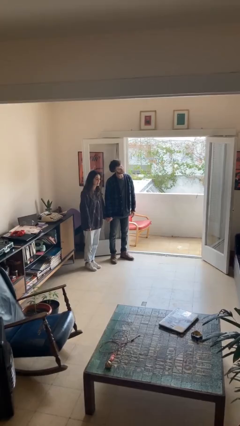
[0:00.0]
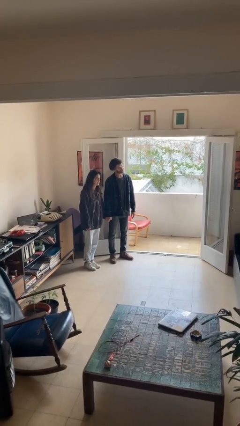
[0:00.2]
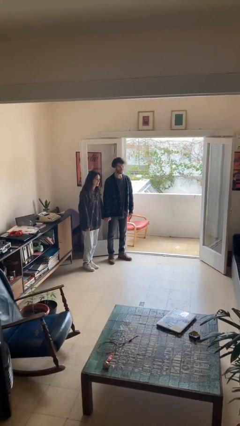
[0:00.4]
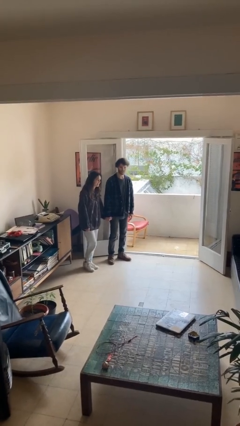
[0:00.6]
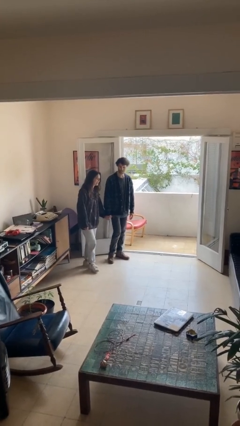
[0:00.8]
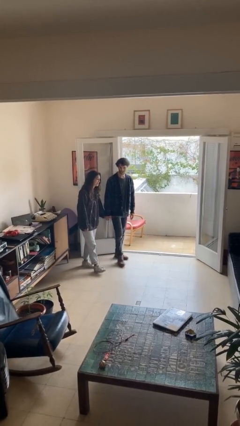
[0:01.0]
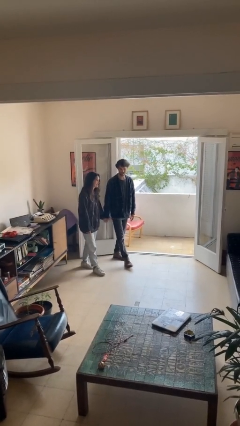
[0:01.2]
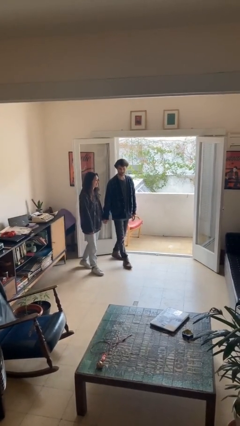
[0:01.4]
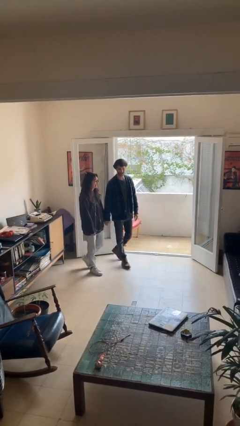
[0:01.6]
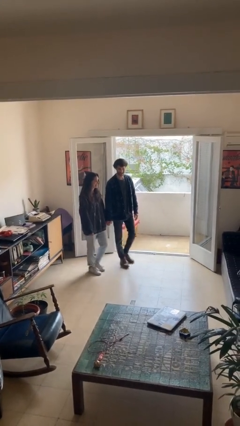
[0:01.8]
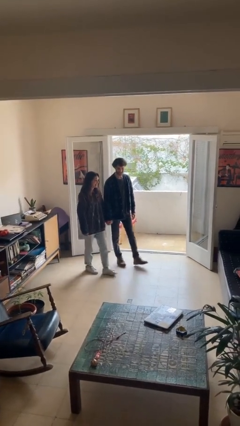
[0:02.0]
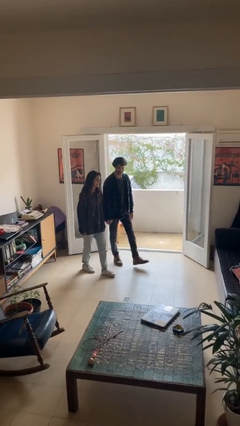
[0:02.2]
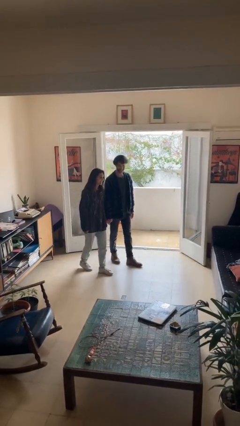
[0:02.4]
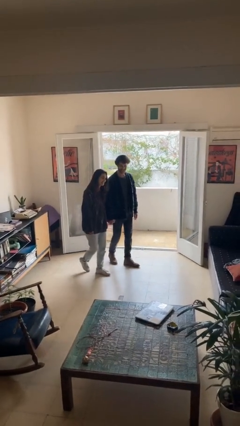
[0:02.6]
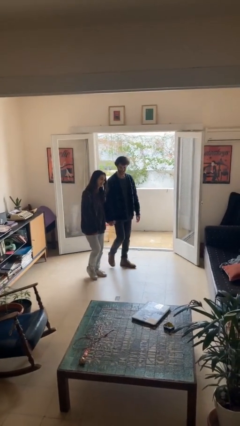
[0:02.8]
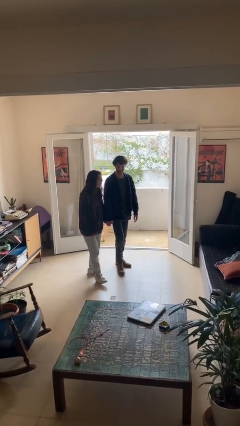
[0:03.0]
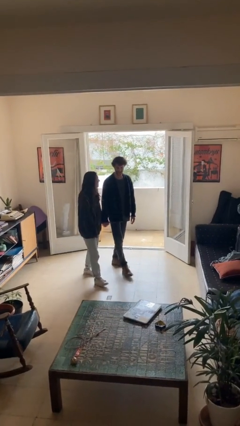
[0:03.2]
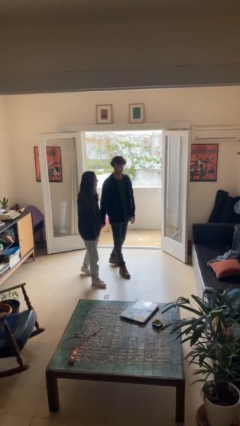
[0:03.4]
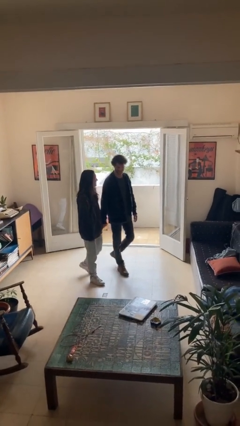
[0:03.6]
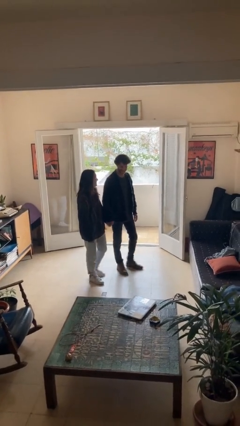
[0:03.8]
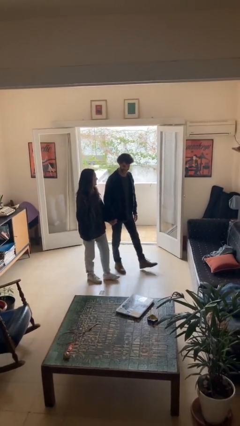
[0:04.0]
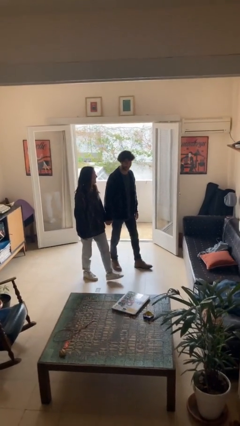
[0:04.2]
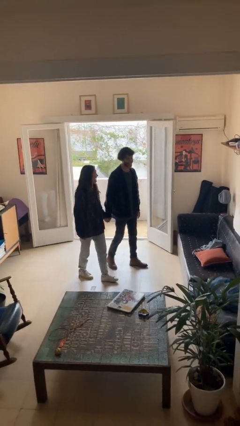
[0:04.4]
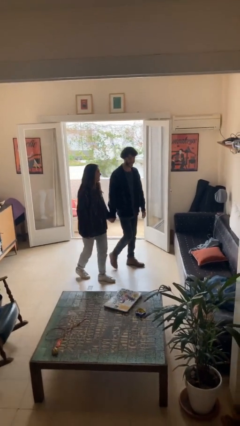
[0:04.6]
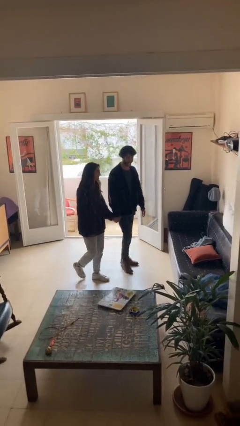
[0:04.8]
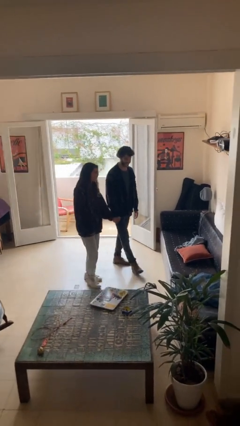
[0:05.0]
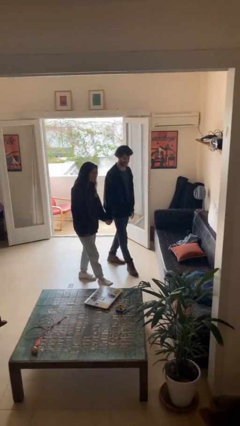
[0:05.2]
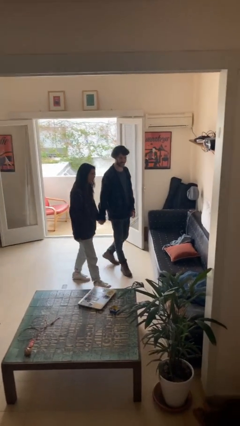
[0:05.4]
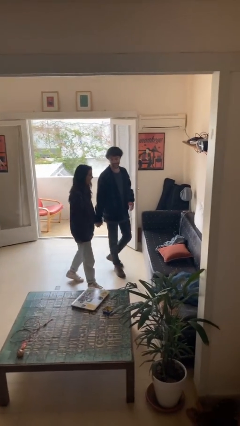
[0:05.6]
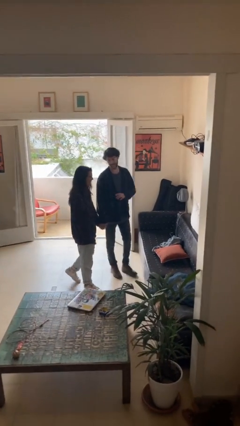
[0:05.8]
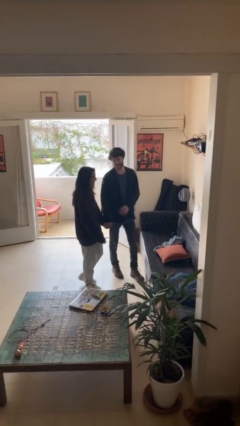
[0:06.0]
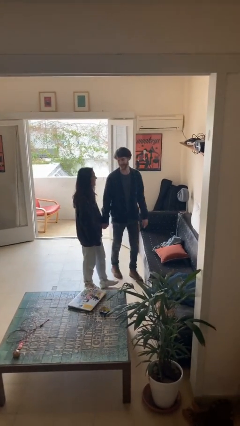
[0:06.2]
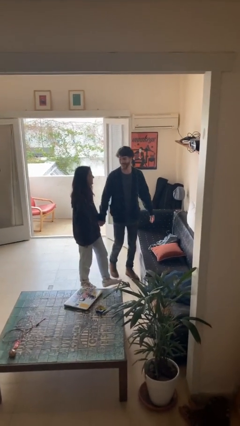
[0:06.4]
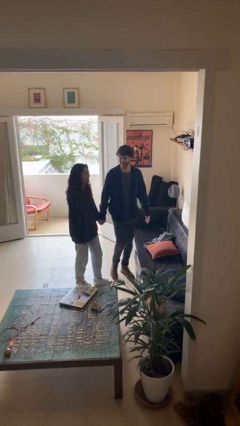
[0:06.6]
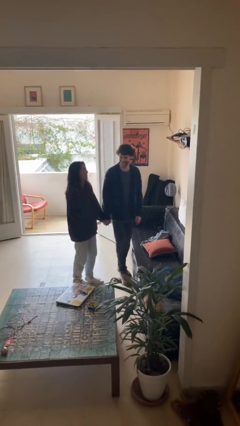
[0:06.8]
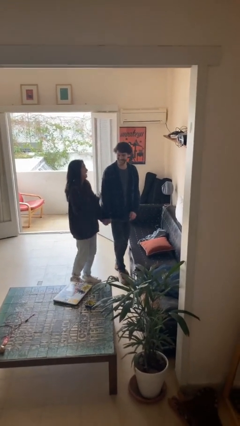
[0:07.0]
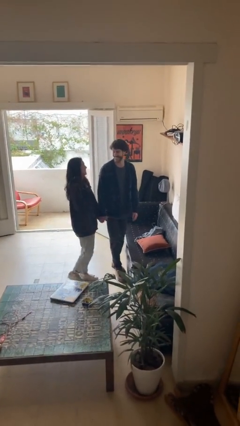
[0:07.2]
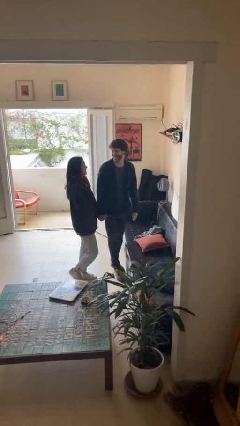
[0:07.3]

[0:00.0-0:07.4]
person holds hand

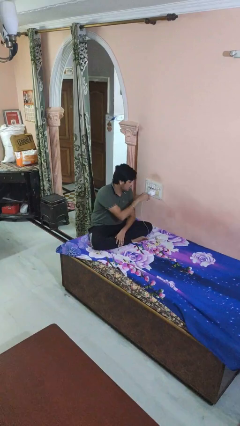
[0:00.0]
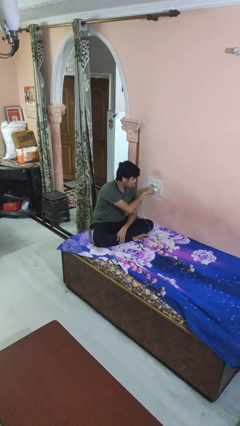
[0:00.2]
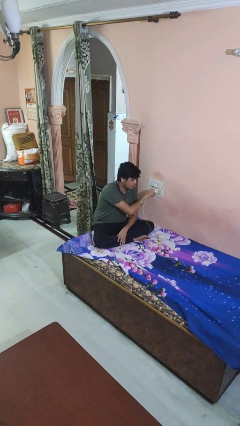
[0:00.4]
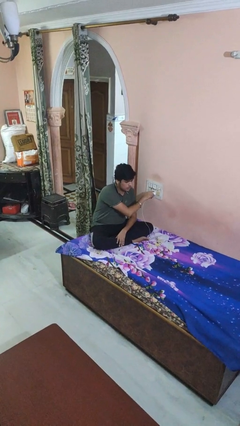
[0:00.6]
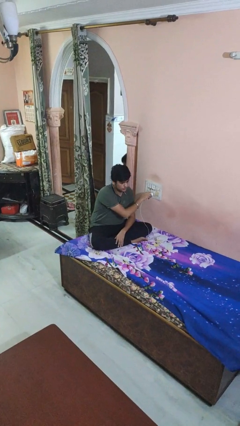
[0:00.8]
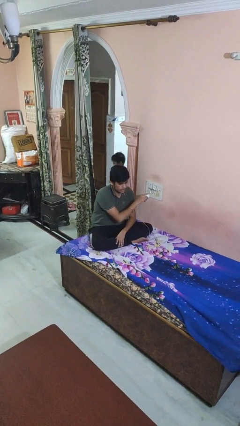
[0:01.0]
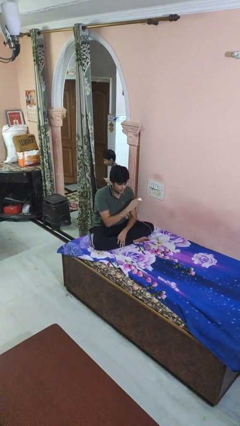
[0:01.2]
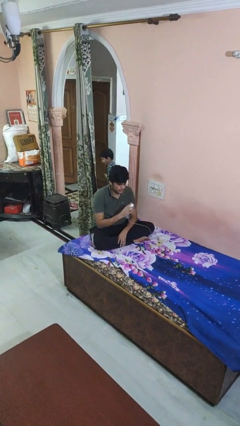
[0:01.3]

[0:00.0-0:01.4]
person unplugs from electrical socket

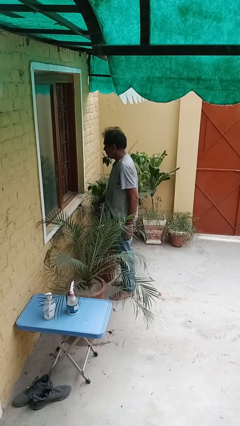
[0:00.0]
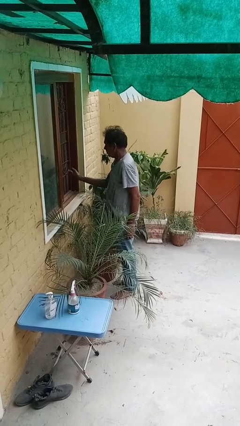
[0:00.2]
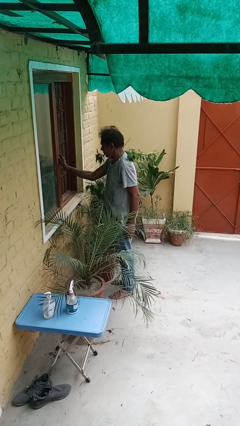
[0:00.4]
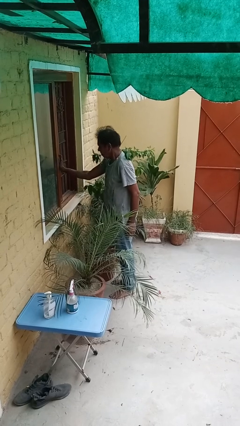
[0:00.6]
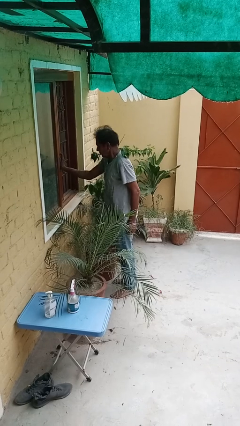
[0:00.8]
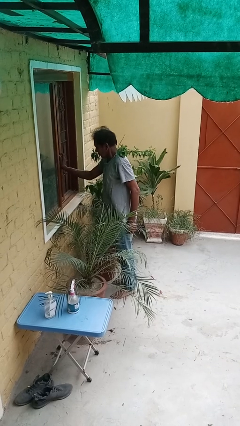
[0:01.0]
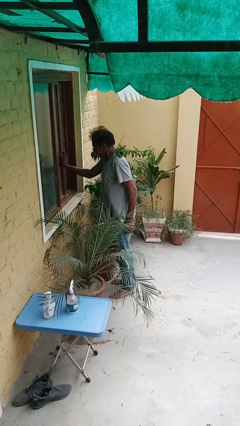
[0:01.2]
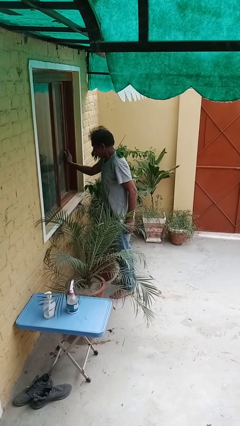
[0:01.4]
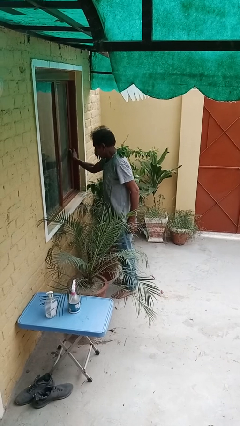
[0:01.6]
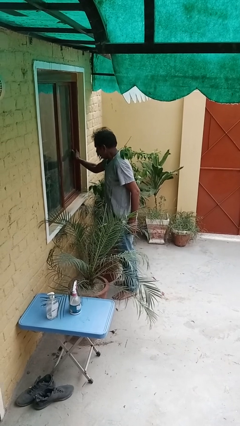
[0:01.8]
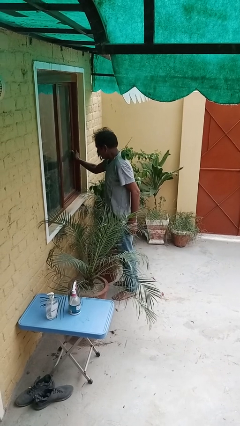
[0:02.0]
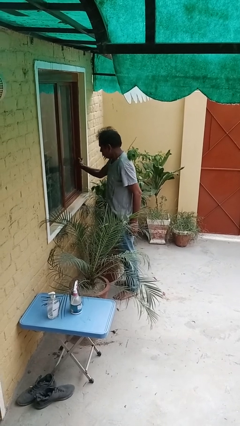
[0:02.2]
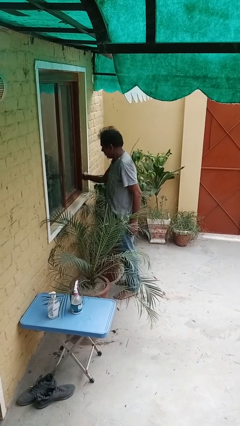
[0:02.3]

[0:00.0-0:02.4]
person closes home window

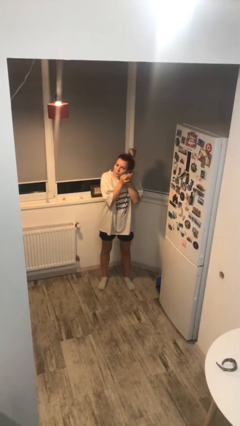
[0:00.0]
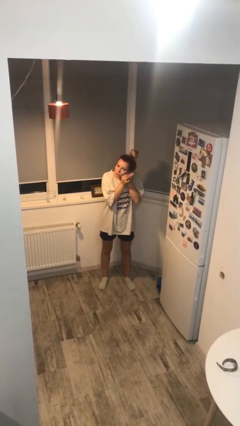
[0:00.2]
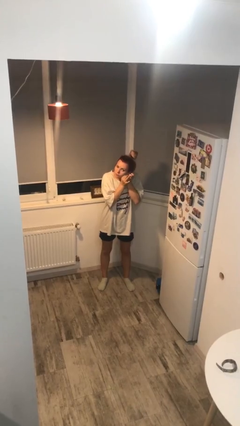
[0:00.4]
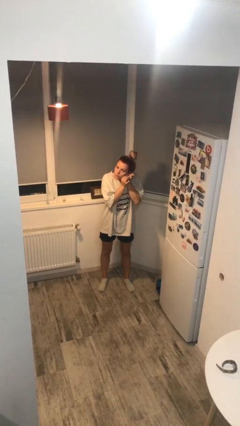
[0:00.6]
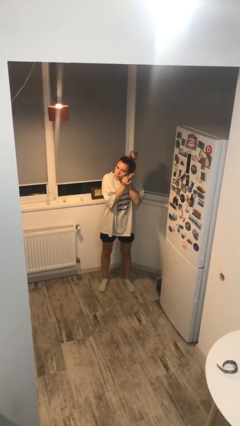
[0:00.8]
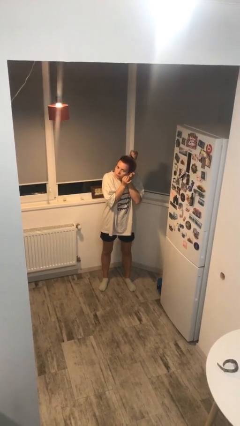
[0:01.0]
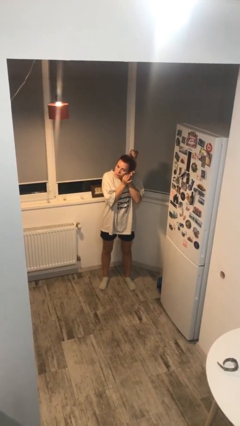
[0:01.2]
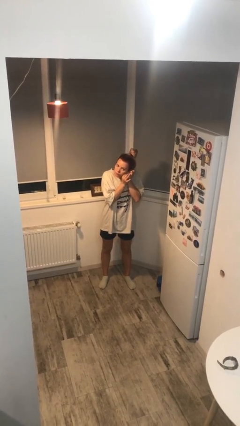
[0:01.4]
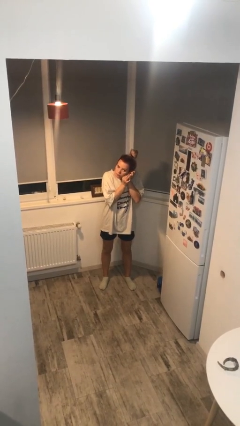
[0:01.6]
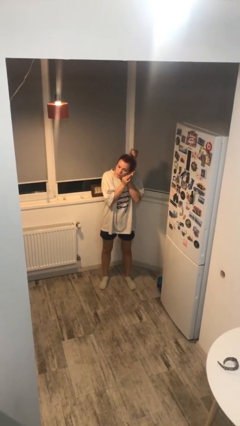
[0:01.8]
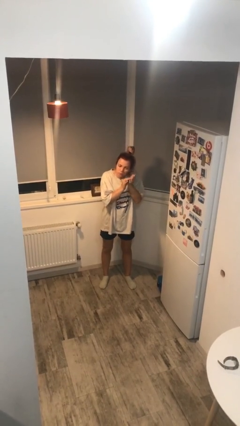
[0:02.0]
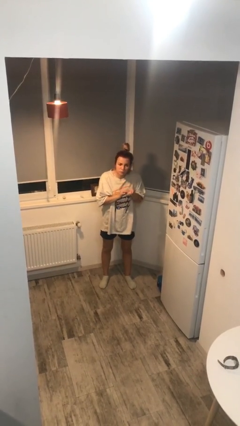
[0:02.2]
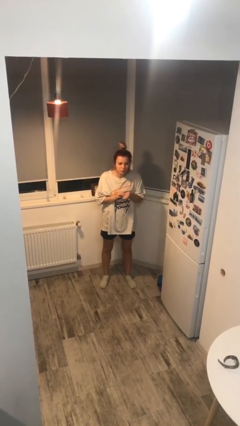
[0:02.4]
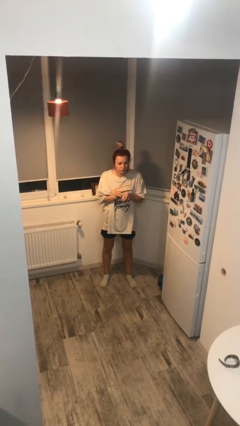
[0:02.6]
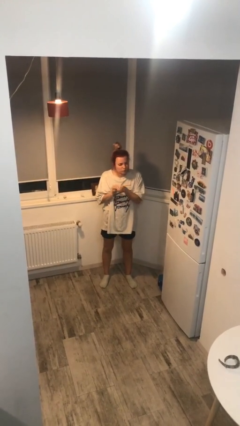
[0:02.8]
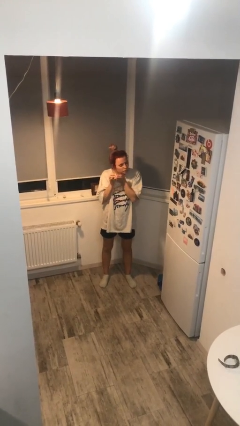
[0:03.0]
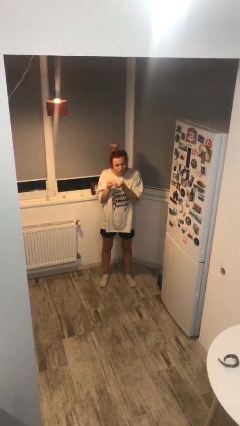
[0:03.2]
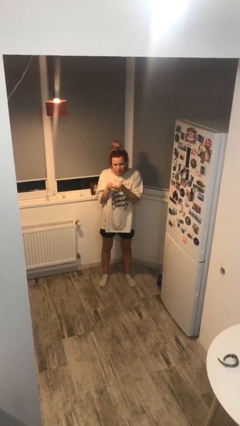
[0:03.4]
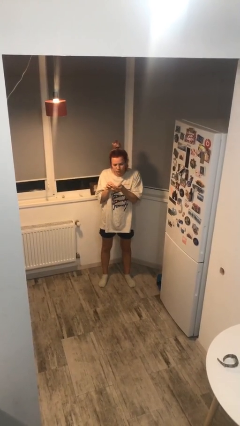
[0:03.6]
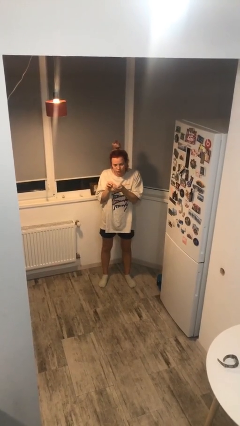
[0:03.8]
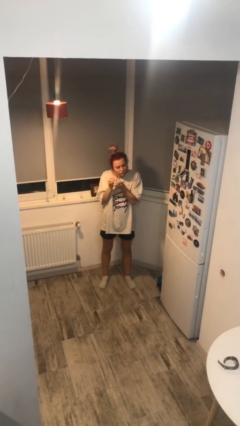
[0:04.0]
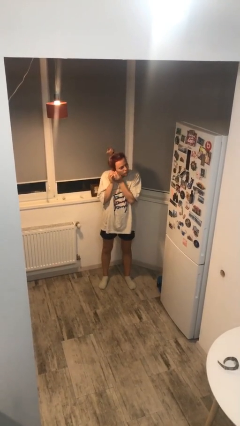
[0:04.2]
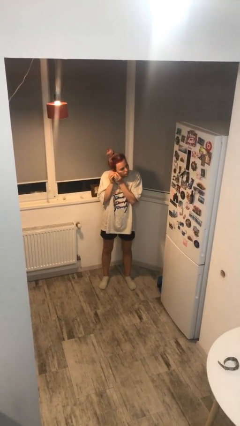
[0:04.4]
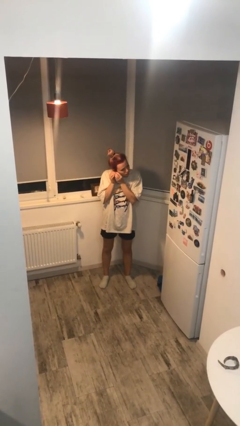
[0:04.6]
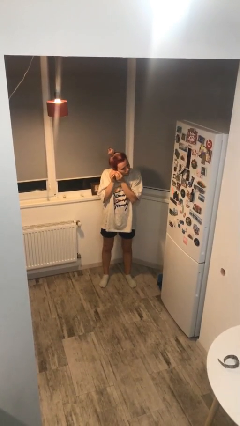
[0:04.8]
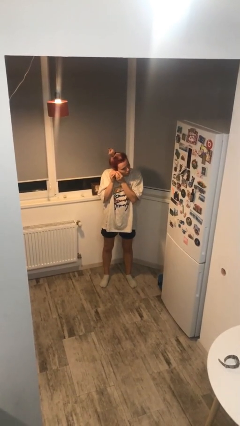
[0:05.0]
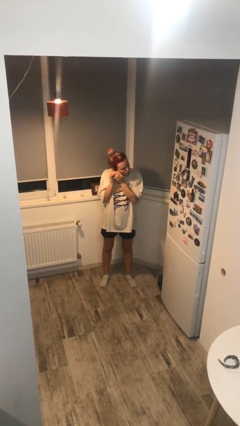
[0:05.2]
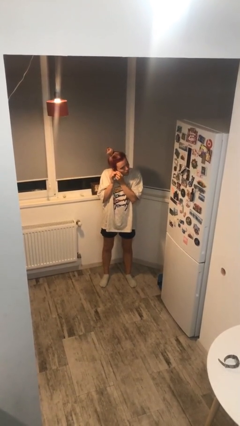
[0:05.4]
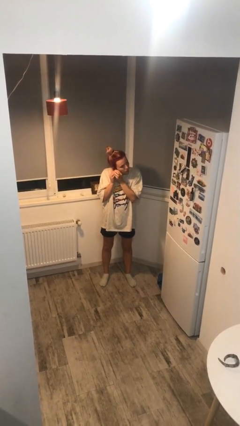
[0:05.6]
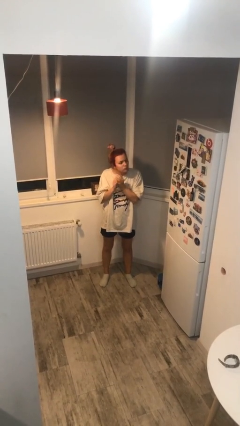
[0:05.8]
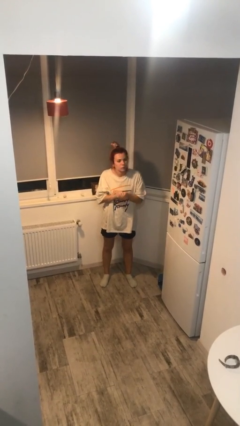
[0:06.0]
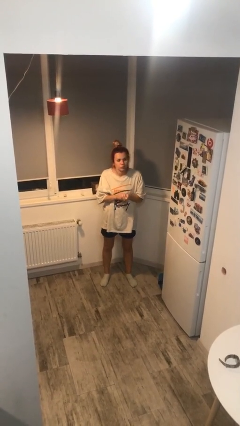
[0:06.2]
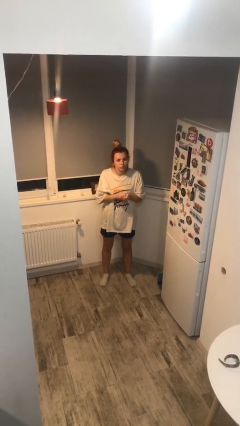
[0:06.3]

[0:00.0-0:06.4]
person puts on earrings
